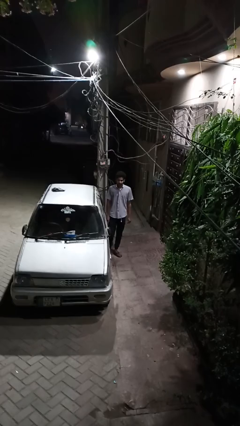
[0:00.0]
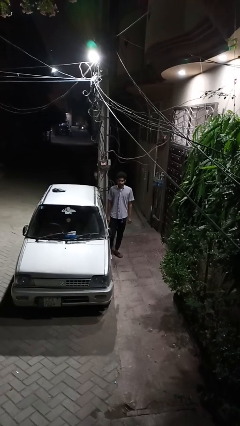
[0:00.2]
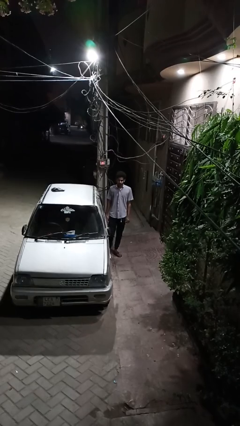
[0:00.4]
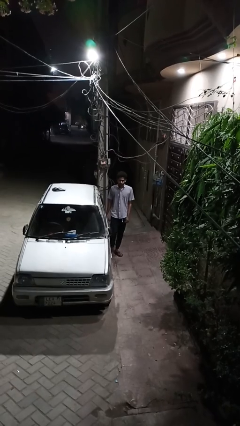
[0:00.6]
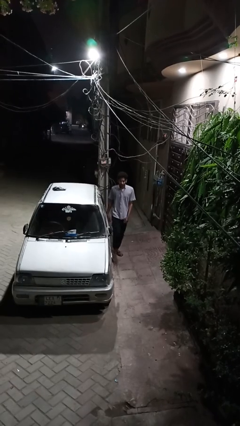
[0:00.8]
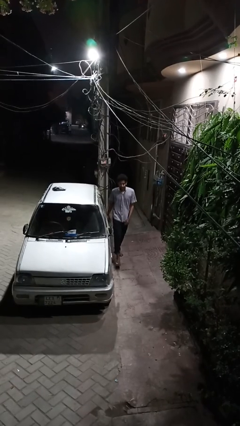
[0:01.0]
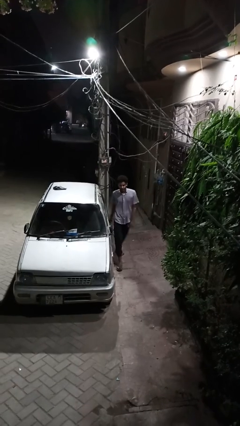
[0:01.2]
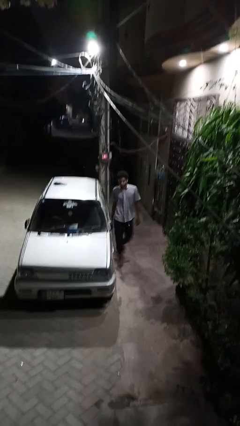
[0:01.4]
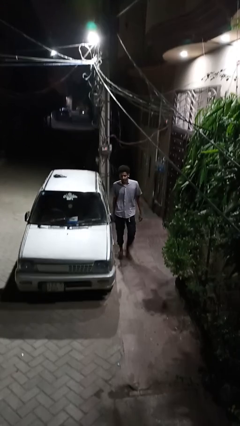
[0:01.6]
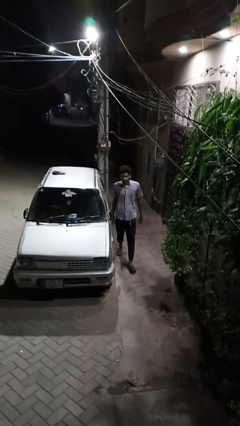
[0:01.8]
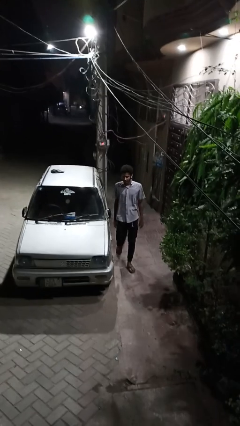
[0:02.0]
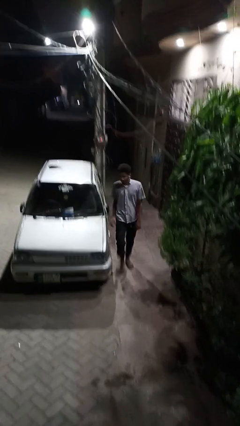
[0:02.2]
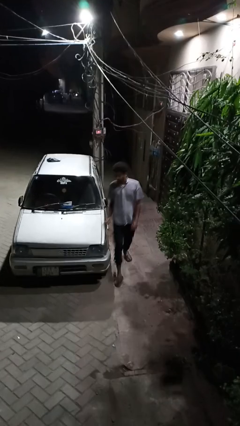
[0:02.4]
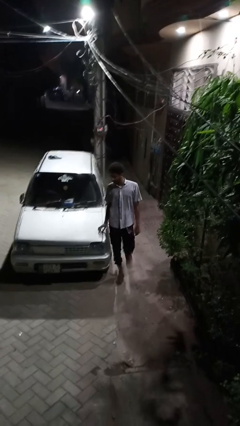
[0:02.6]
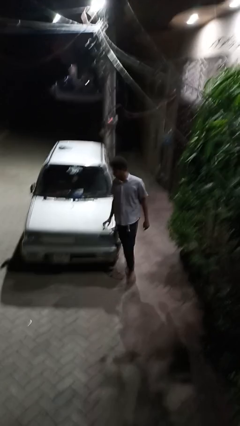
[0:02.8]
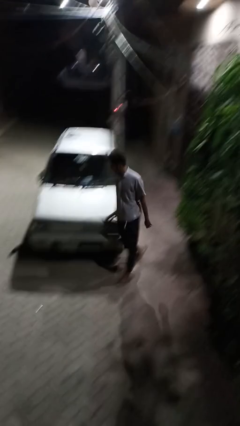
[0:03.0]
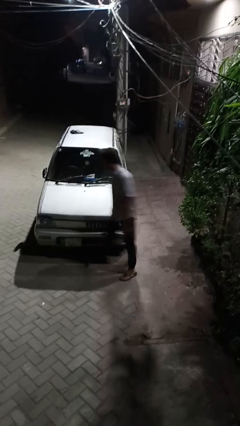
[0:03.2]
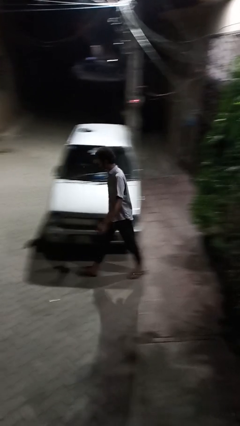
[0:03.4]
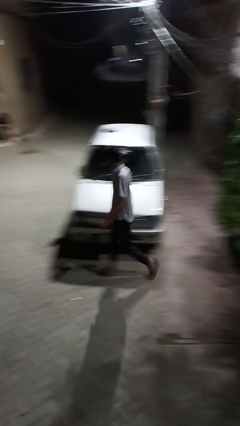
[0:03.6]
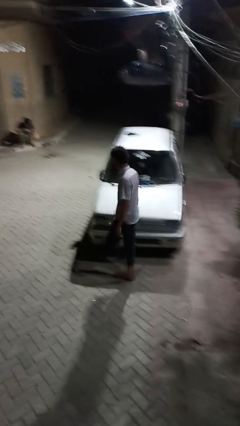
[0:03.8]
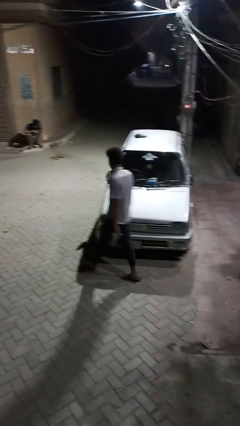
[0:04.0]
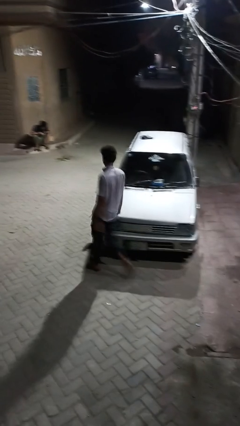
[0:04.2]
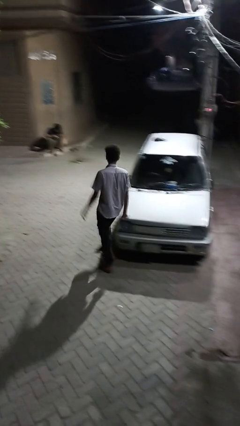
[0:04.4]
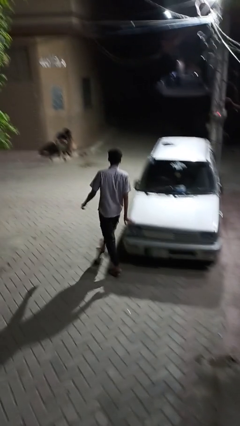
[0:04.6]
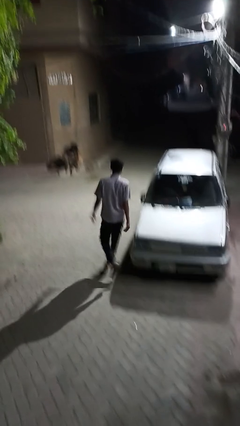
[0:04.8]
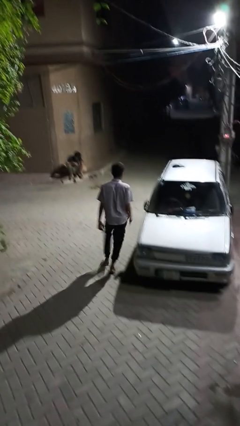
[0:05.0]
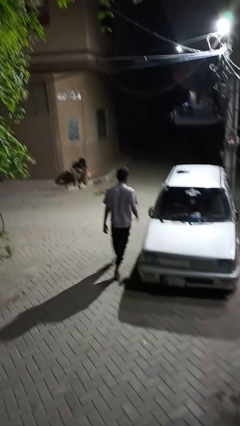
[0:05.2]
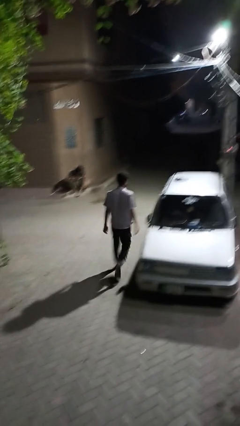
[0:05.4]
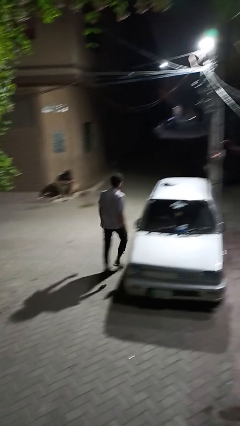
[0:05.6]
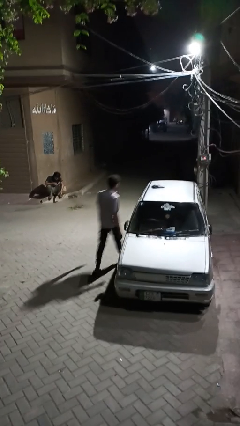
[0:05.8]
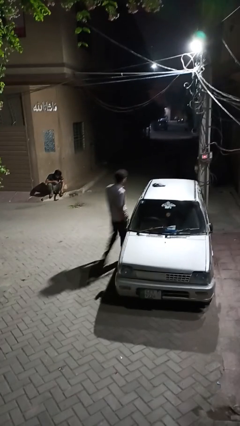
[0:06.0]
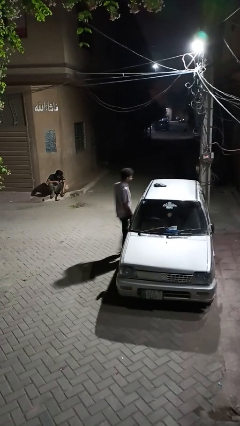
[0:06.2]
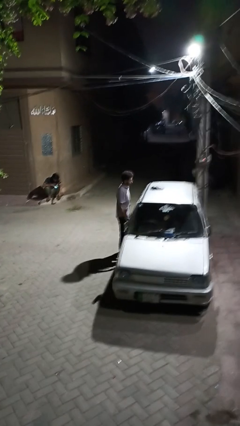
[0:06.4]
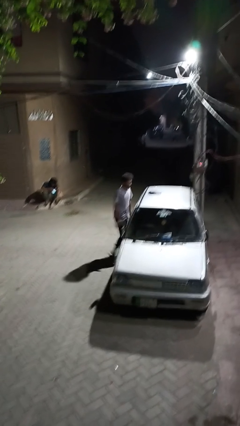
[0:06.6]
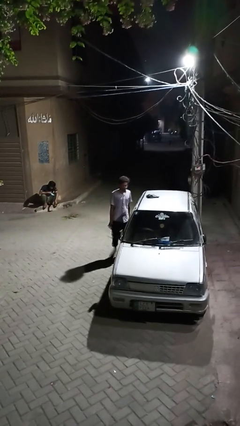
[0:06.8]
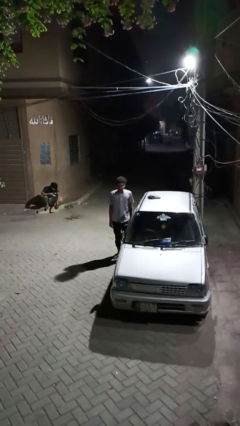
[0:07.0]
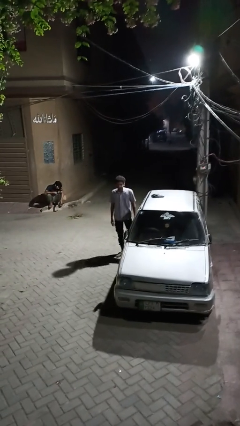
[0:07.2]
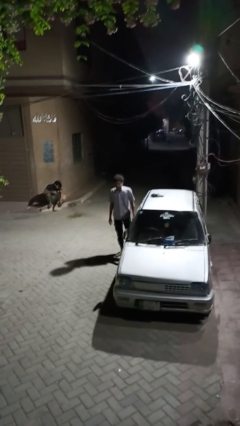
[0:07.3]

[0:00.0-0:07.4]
person walks around car

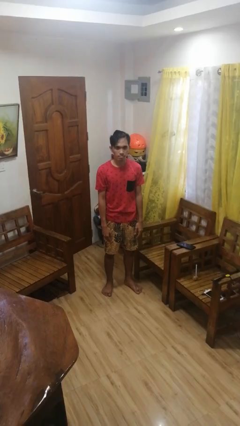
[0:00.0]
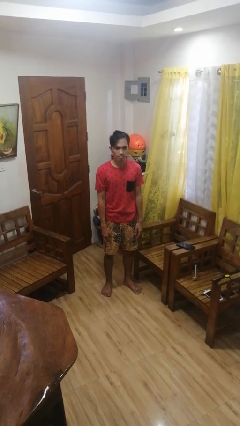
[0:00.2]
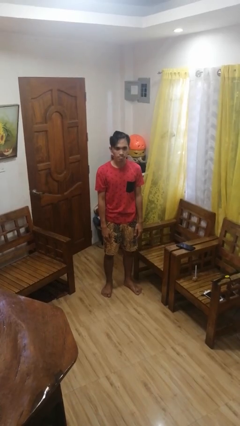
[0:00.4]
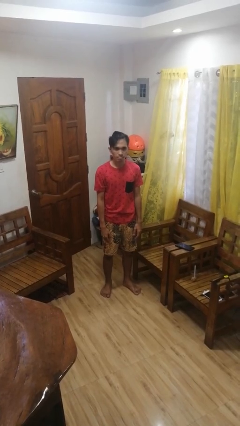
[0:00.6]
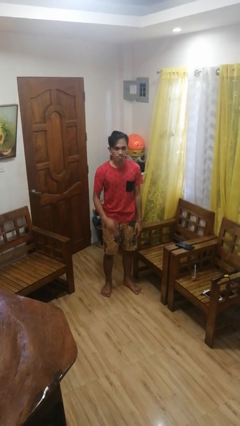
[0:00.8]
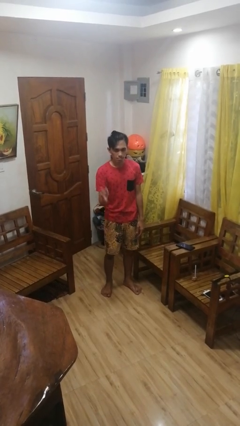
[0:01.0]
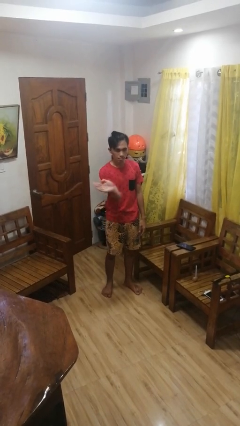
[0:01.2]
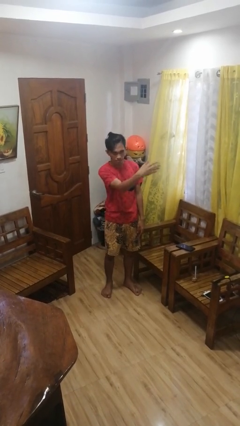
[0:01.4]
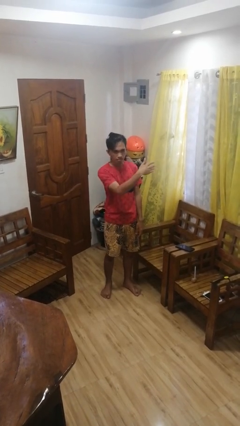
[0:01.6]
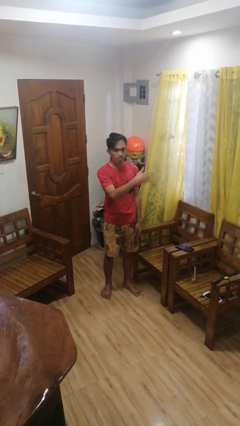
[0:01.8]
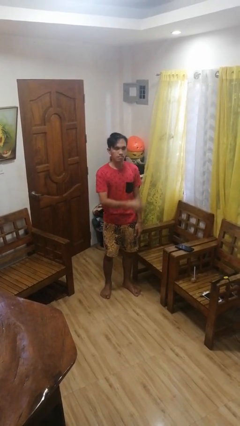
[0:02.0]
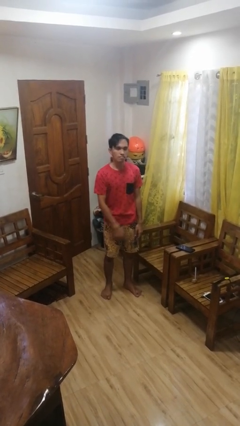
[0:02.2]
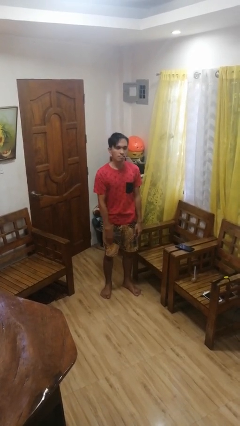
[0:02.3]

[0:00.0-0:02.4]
person gestures swipe left

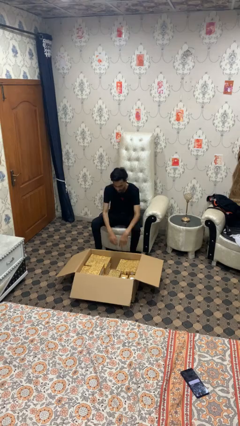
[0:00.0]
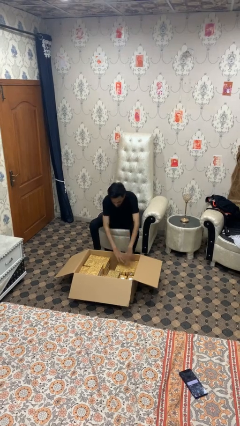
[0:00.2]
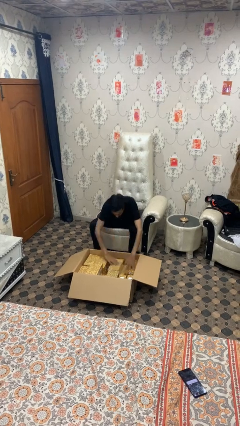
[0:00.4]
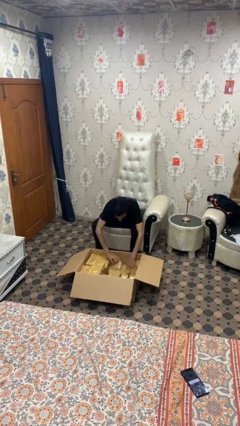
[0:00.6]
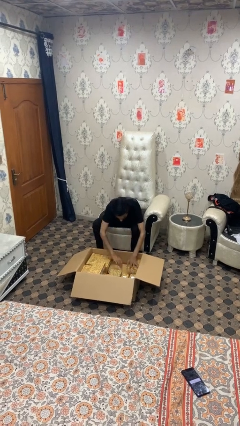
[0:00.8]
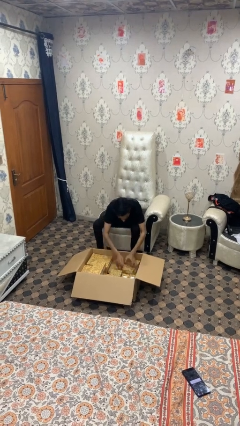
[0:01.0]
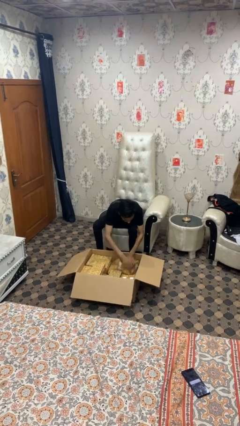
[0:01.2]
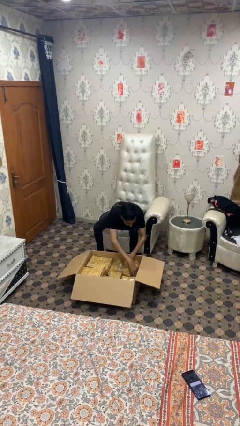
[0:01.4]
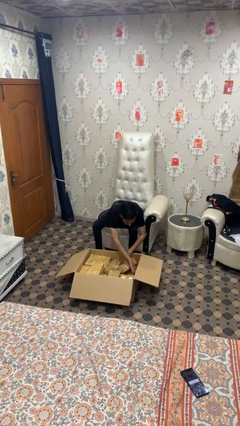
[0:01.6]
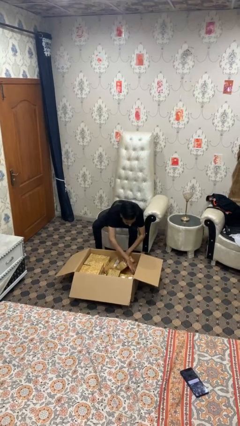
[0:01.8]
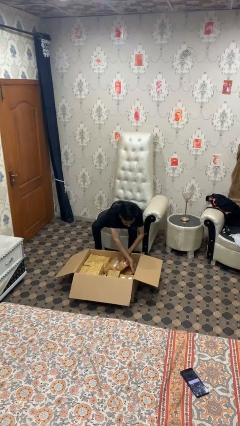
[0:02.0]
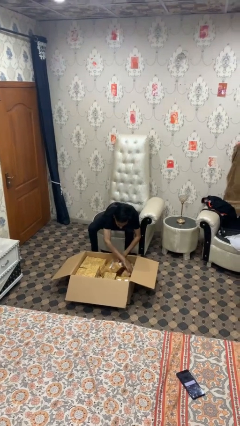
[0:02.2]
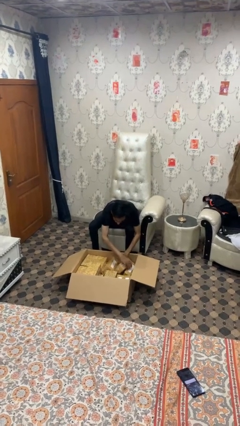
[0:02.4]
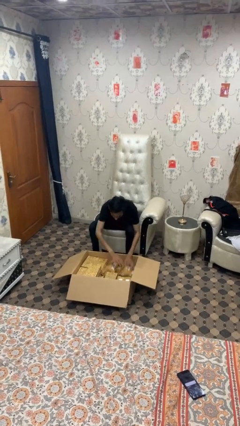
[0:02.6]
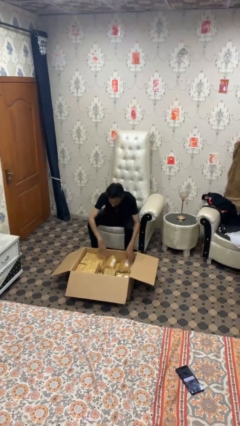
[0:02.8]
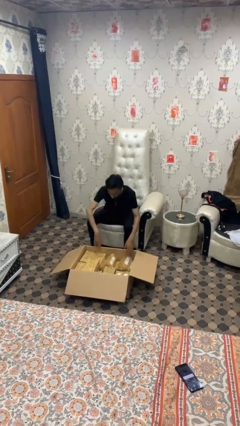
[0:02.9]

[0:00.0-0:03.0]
person searches in box

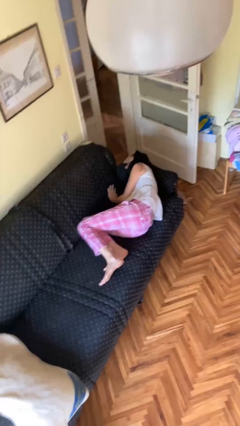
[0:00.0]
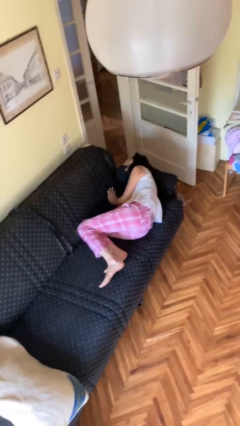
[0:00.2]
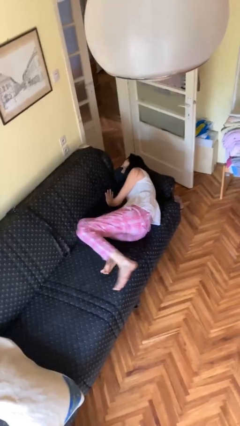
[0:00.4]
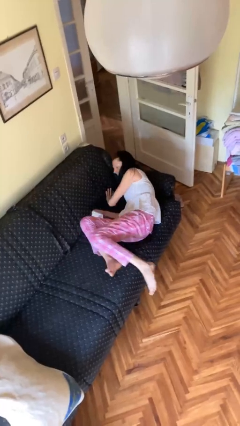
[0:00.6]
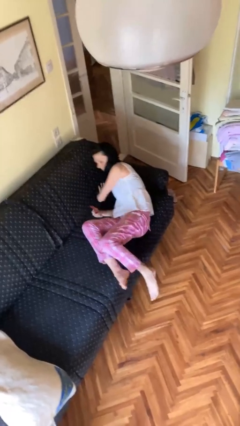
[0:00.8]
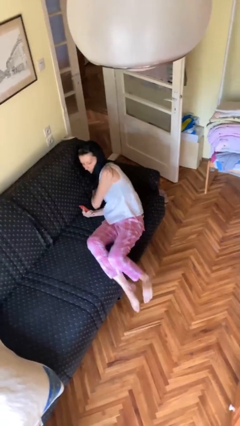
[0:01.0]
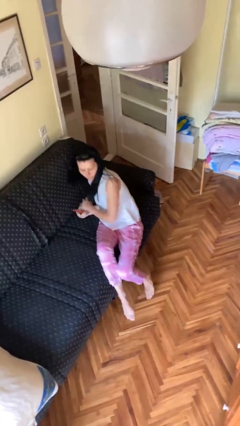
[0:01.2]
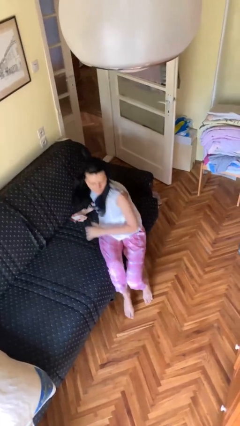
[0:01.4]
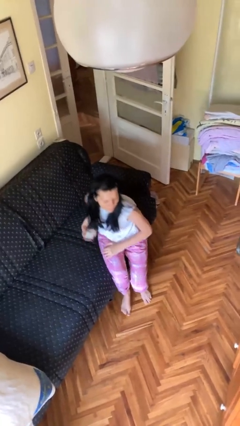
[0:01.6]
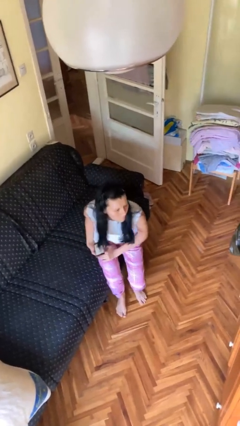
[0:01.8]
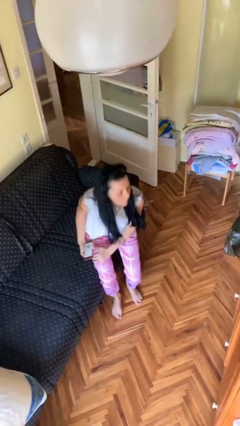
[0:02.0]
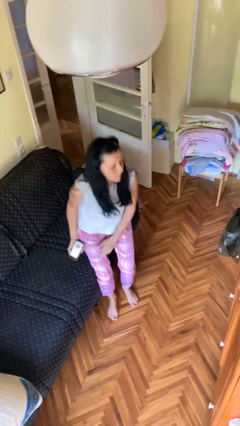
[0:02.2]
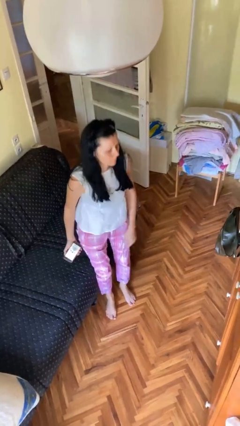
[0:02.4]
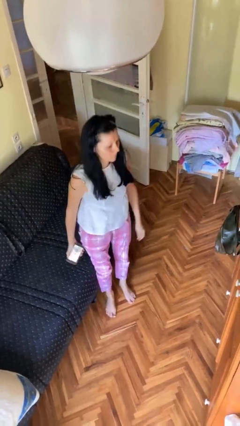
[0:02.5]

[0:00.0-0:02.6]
person stands up

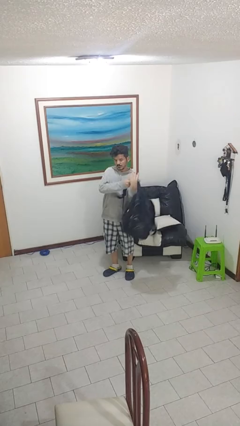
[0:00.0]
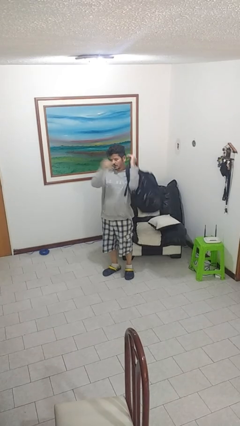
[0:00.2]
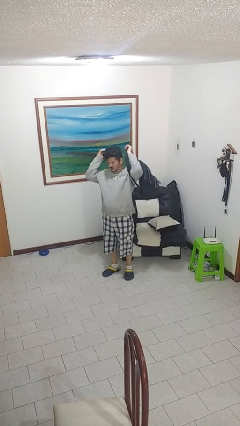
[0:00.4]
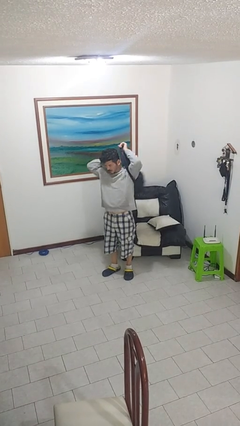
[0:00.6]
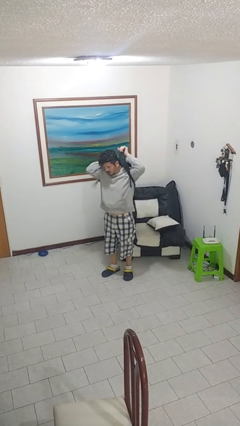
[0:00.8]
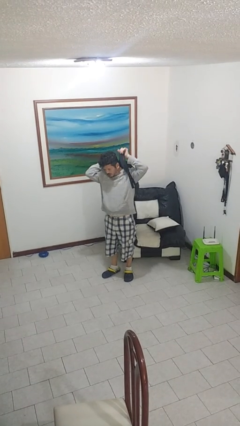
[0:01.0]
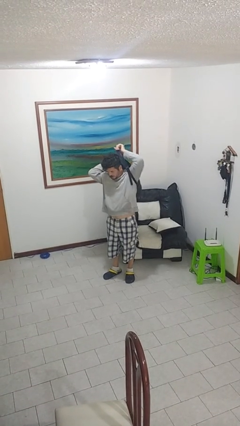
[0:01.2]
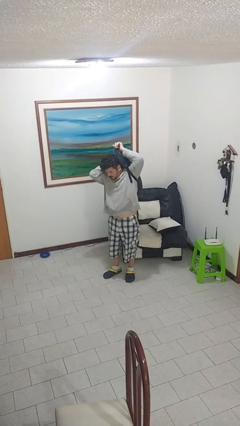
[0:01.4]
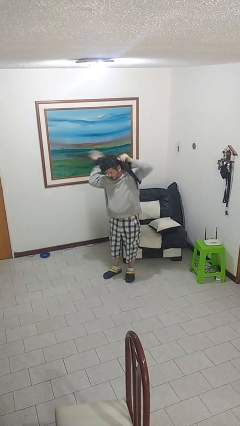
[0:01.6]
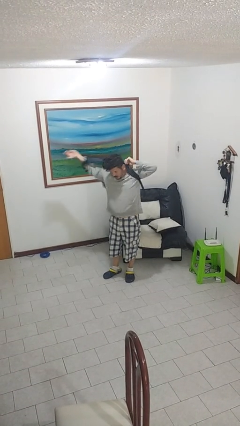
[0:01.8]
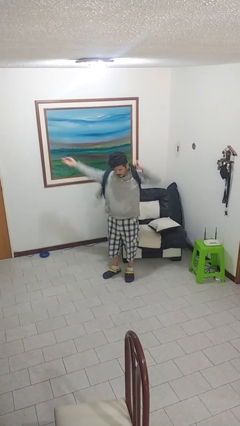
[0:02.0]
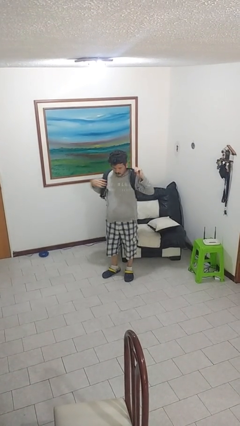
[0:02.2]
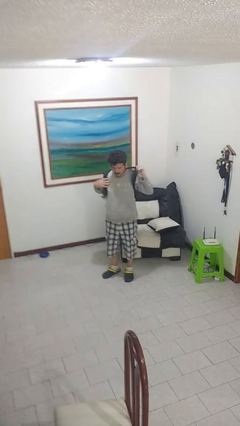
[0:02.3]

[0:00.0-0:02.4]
person puts on backpack

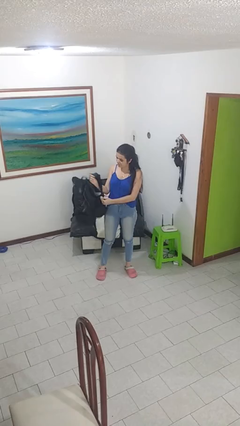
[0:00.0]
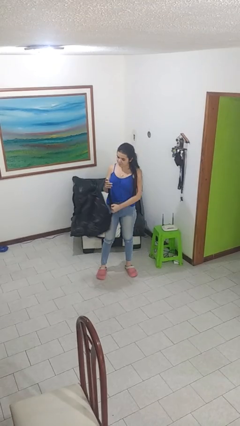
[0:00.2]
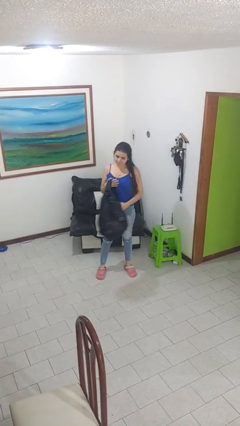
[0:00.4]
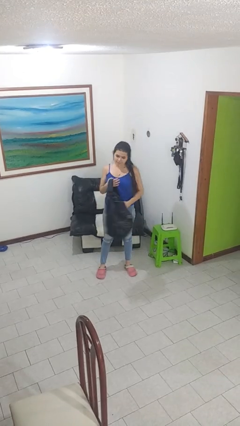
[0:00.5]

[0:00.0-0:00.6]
person takes off backpack
